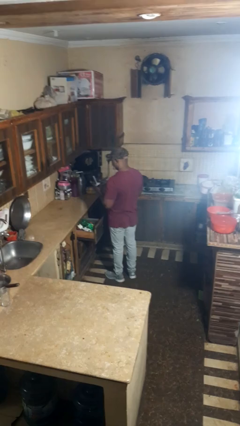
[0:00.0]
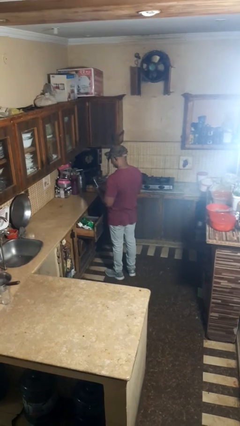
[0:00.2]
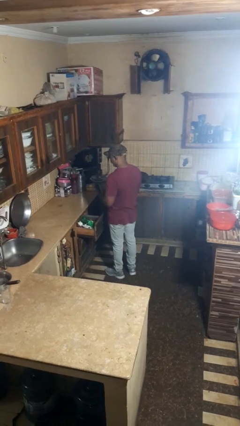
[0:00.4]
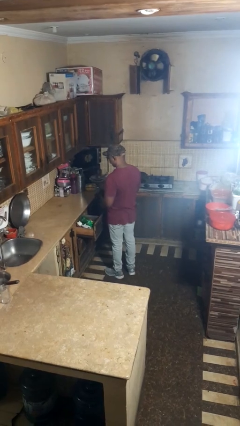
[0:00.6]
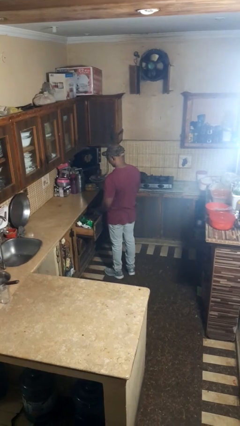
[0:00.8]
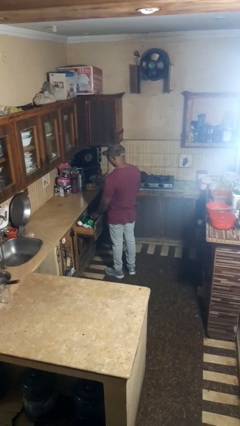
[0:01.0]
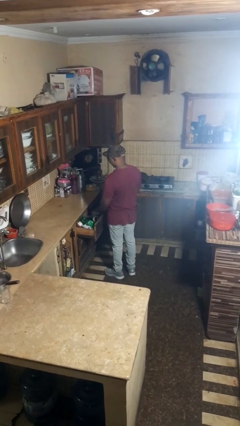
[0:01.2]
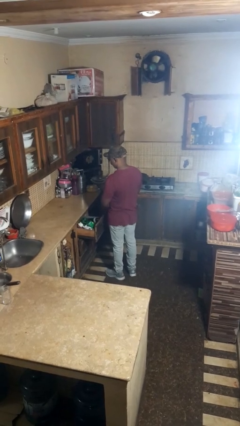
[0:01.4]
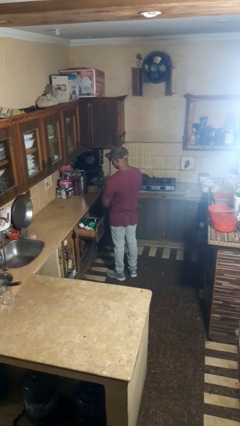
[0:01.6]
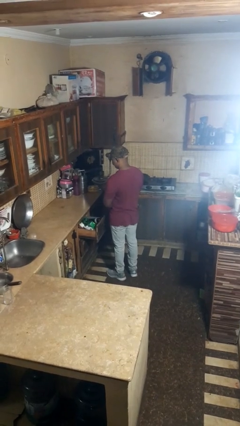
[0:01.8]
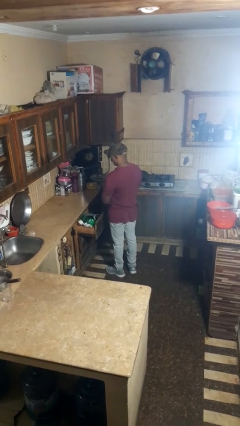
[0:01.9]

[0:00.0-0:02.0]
person puts object into kitchen drawer

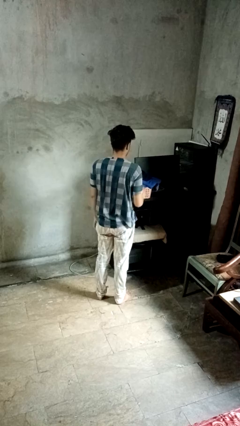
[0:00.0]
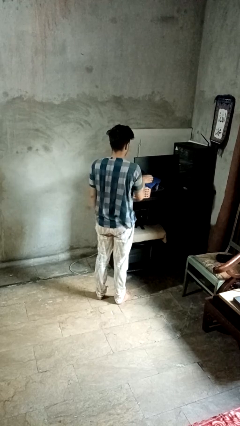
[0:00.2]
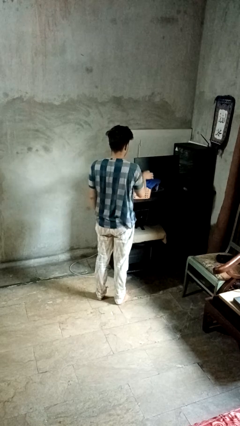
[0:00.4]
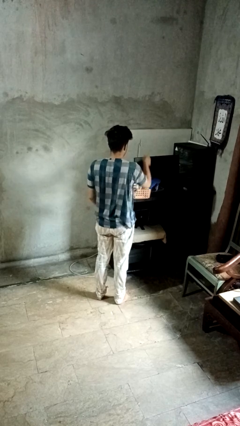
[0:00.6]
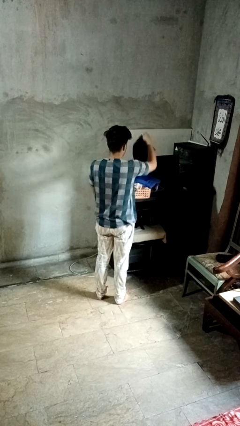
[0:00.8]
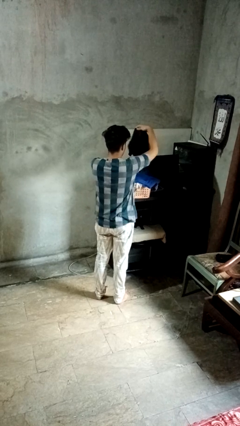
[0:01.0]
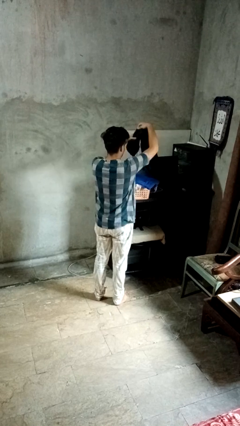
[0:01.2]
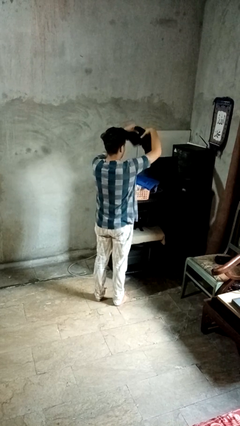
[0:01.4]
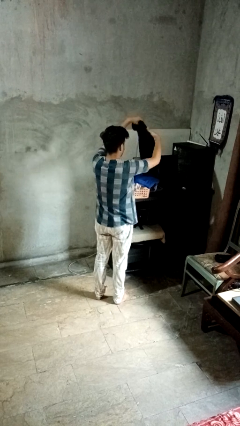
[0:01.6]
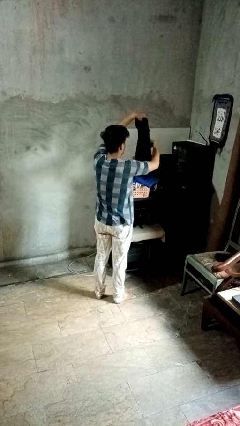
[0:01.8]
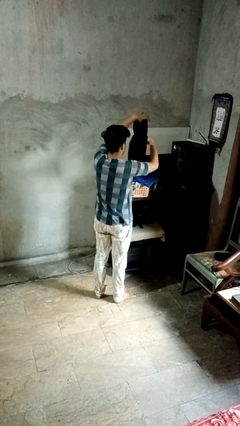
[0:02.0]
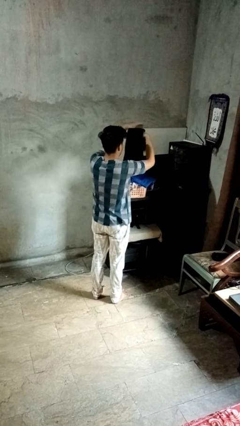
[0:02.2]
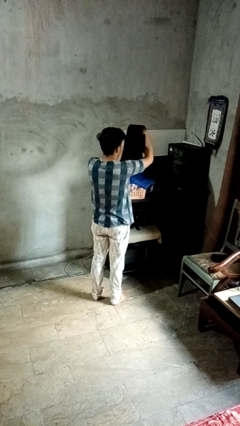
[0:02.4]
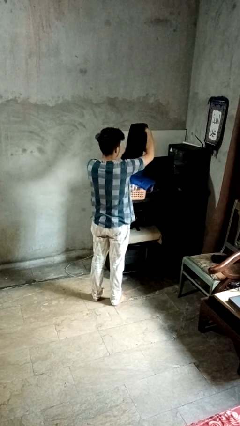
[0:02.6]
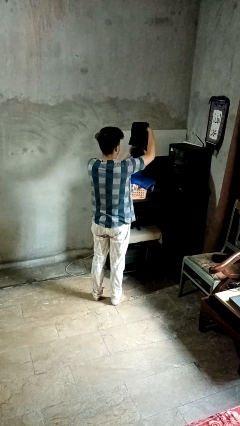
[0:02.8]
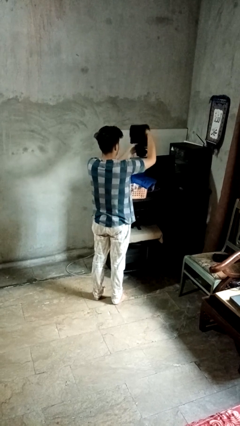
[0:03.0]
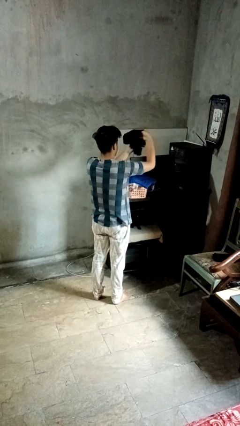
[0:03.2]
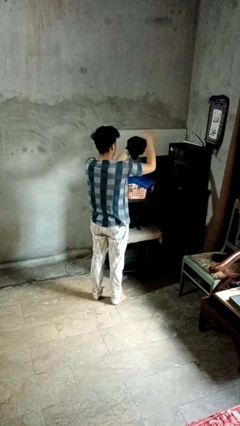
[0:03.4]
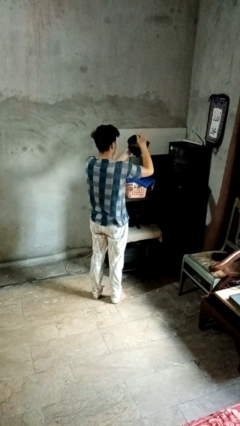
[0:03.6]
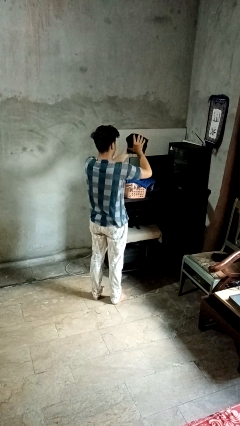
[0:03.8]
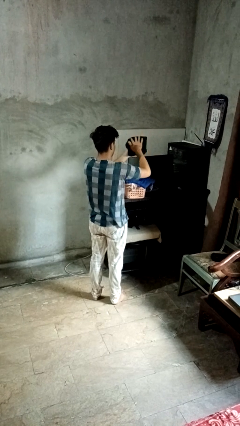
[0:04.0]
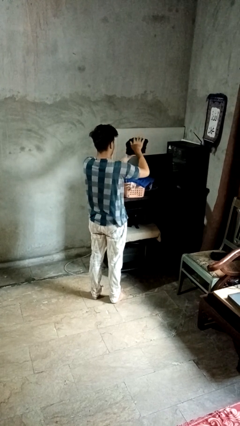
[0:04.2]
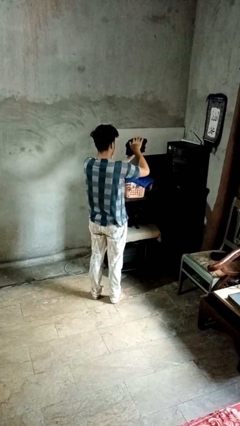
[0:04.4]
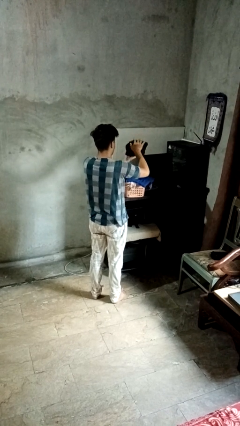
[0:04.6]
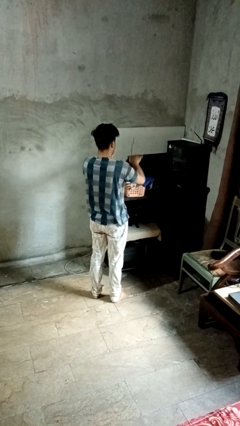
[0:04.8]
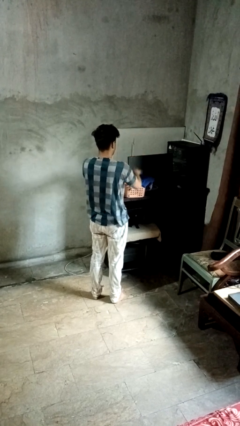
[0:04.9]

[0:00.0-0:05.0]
person folds shirt

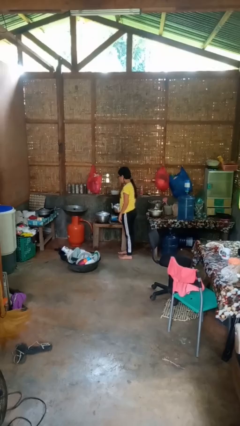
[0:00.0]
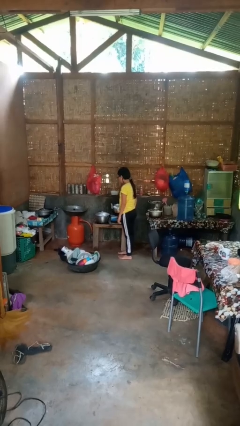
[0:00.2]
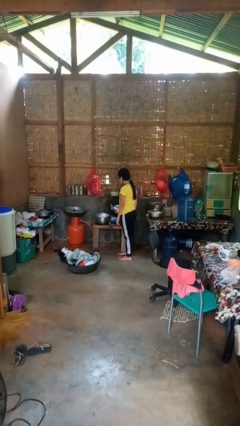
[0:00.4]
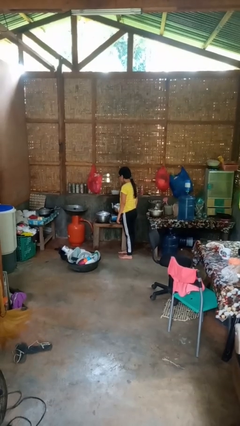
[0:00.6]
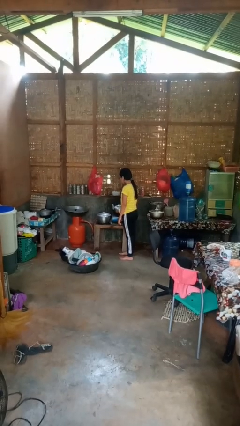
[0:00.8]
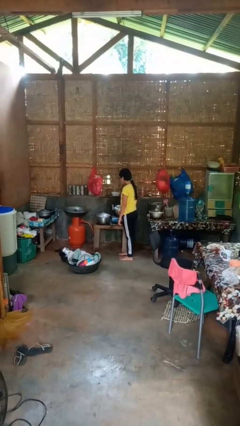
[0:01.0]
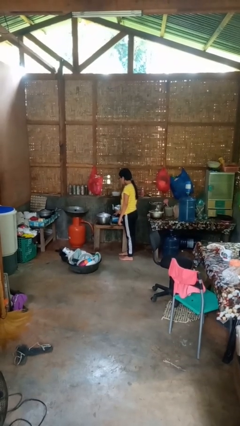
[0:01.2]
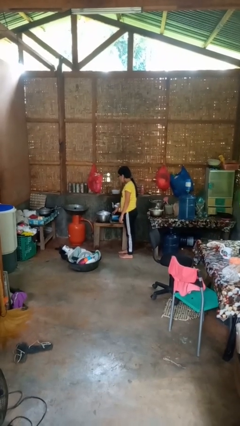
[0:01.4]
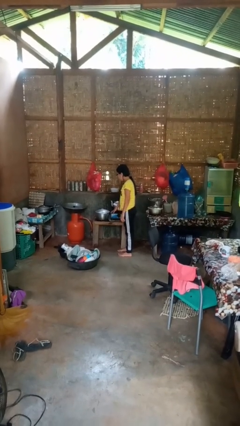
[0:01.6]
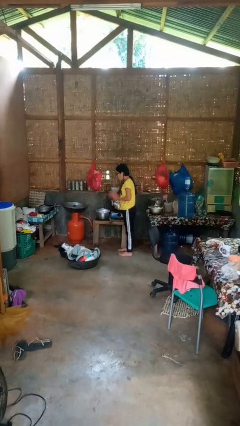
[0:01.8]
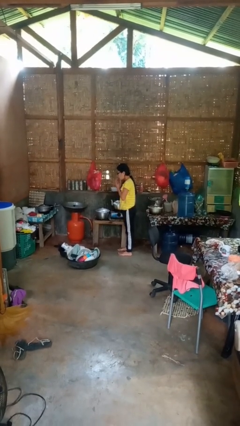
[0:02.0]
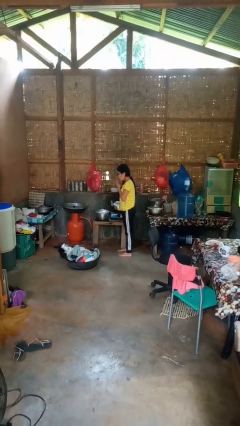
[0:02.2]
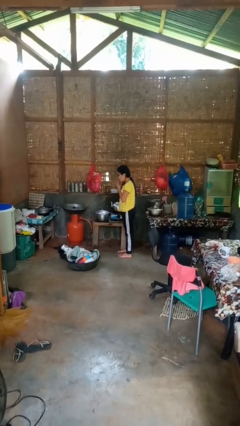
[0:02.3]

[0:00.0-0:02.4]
person burns hand

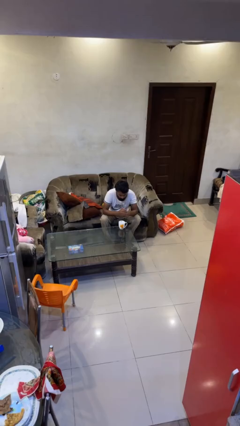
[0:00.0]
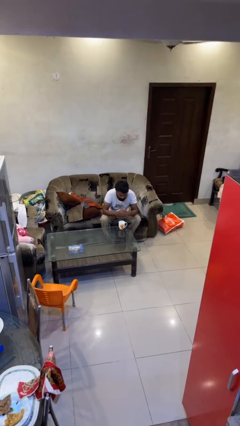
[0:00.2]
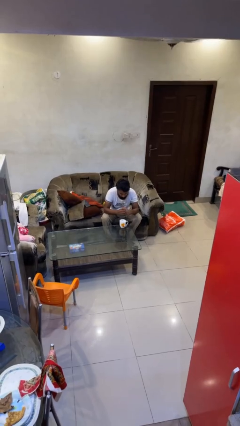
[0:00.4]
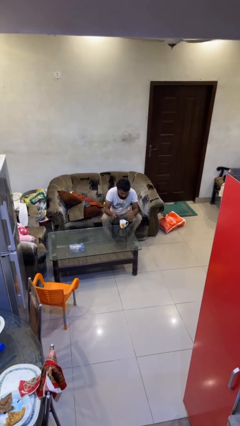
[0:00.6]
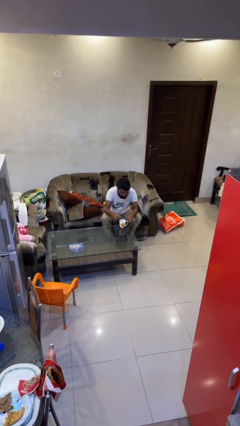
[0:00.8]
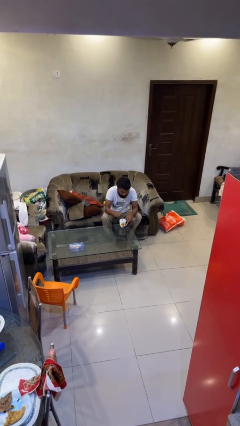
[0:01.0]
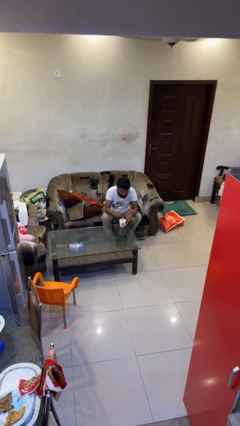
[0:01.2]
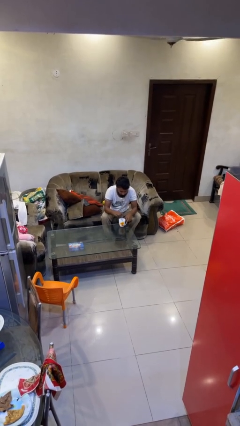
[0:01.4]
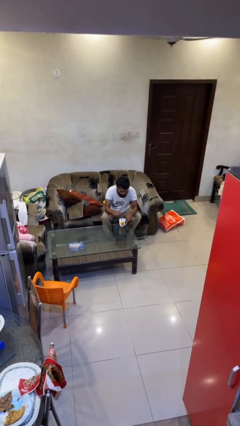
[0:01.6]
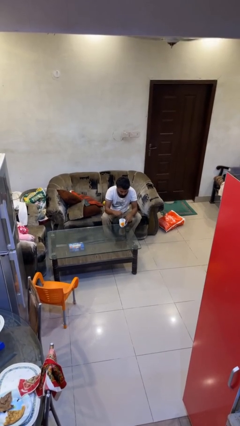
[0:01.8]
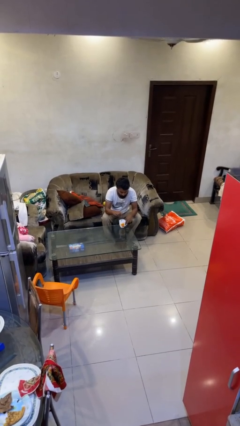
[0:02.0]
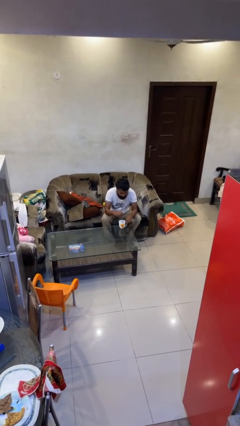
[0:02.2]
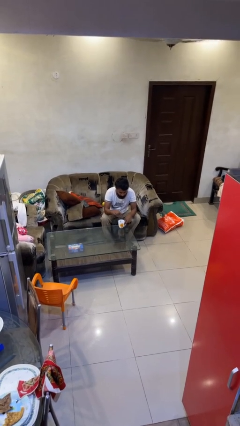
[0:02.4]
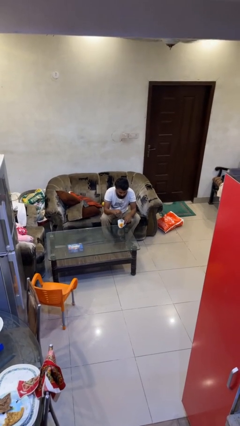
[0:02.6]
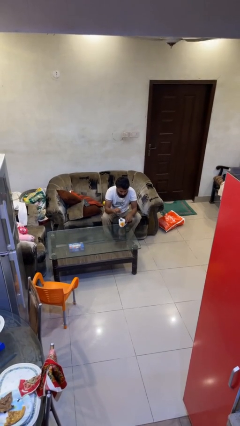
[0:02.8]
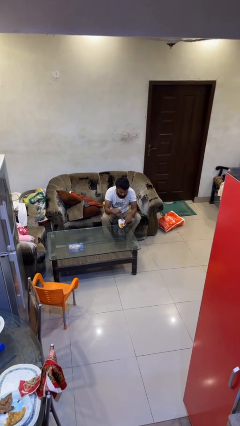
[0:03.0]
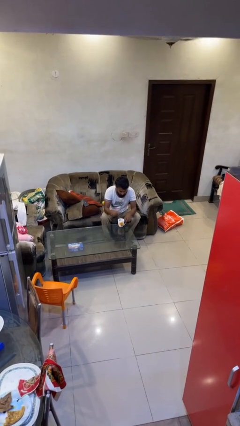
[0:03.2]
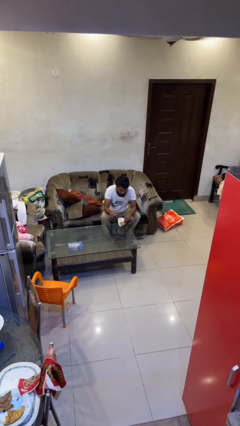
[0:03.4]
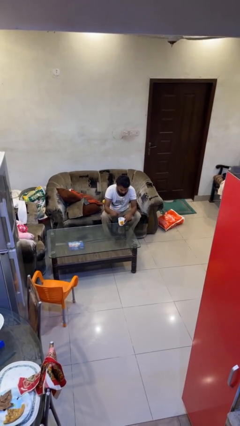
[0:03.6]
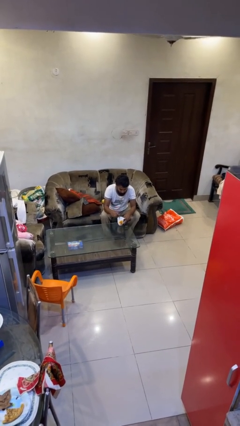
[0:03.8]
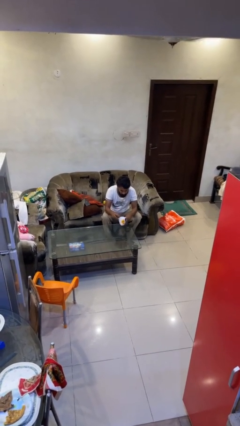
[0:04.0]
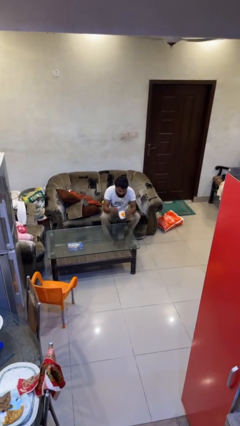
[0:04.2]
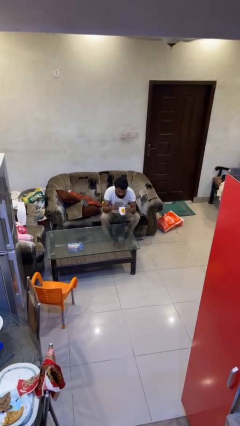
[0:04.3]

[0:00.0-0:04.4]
person stirs mug

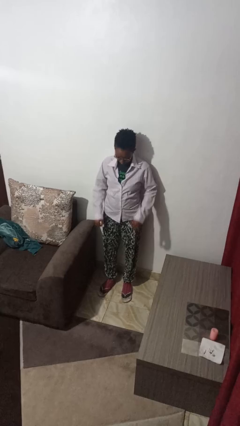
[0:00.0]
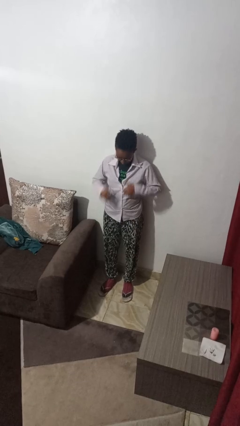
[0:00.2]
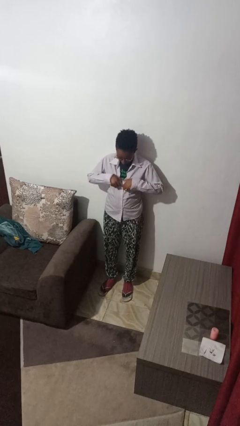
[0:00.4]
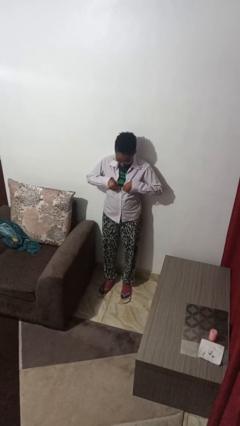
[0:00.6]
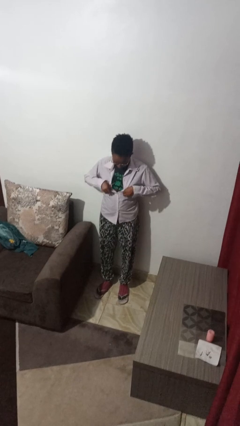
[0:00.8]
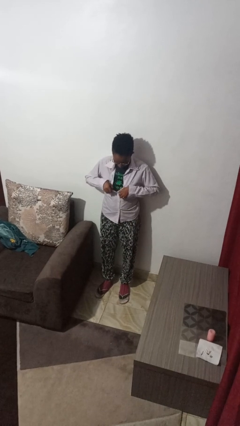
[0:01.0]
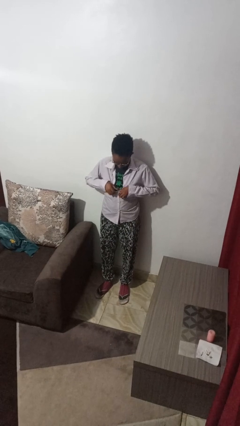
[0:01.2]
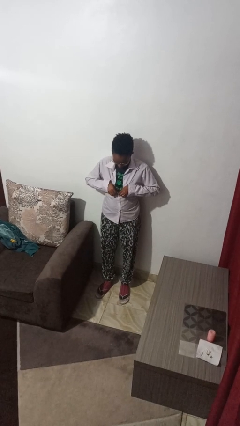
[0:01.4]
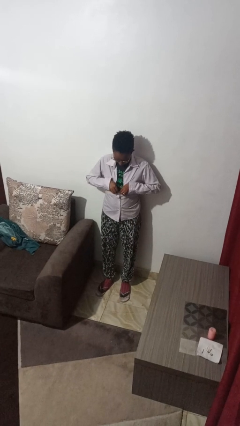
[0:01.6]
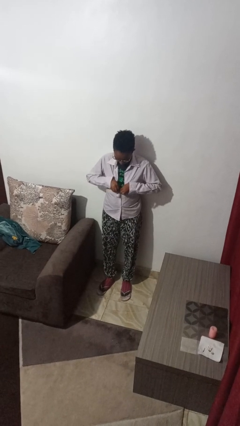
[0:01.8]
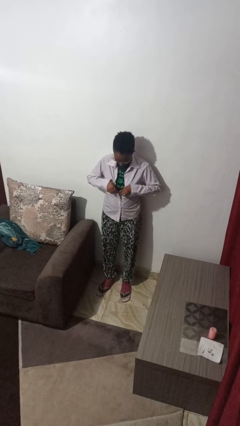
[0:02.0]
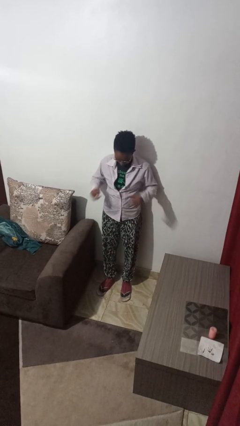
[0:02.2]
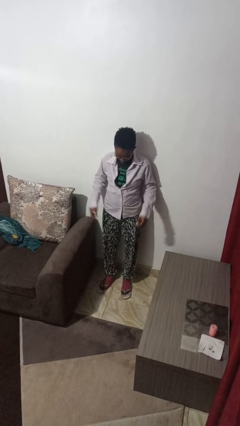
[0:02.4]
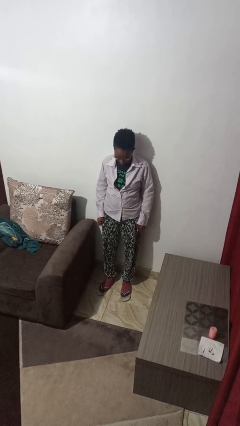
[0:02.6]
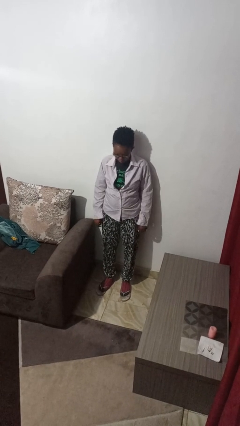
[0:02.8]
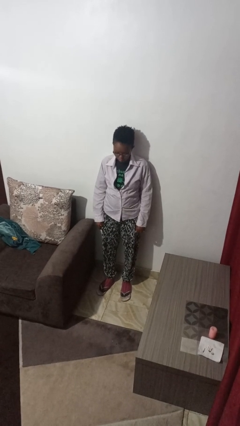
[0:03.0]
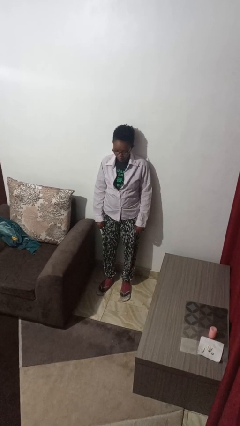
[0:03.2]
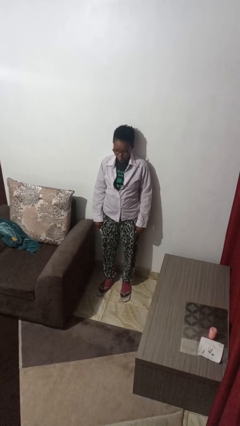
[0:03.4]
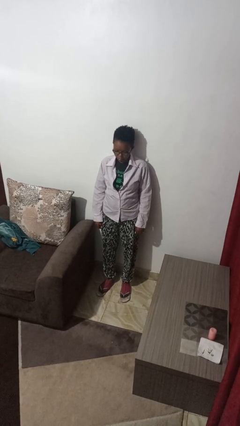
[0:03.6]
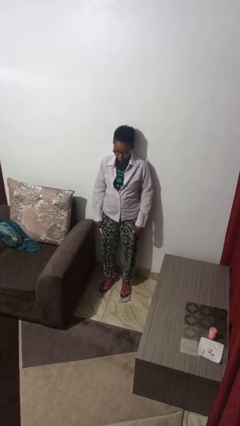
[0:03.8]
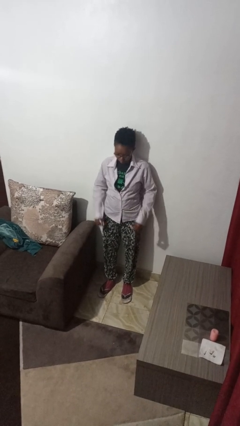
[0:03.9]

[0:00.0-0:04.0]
person unbuttons shirt
